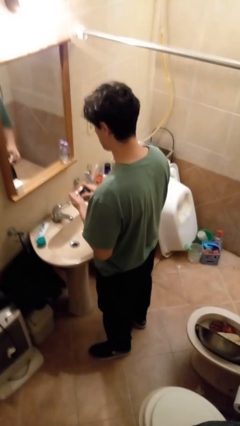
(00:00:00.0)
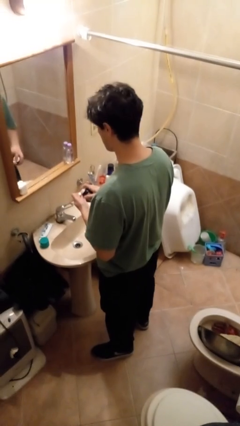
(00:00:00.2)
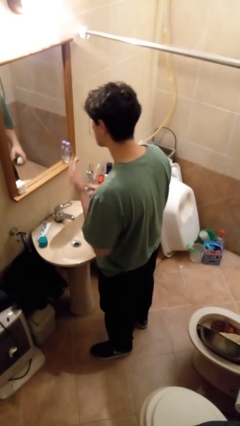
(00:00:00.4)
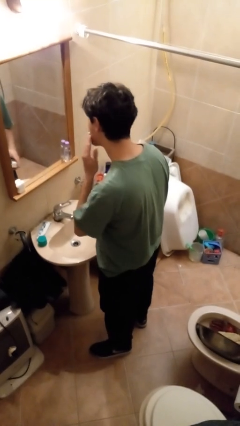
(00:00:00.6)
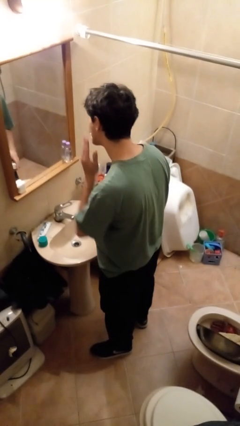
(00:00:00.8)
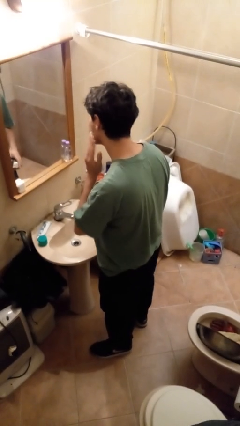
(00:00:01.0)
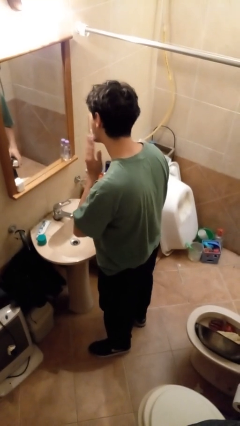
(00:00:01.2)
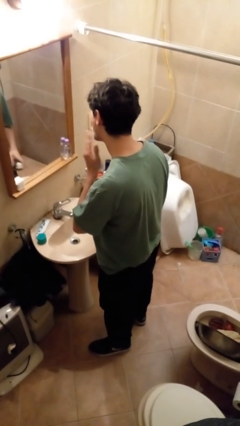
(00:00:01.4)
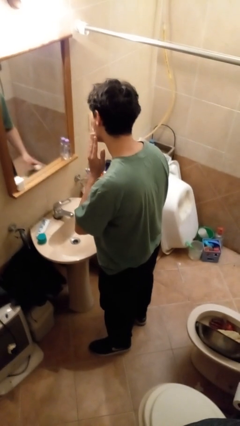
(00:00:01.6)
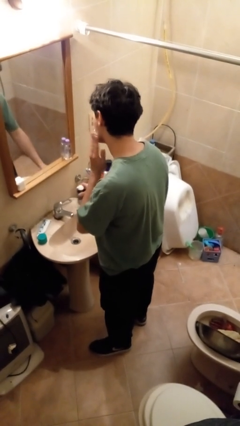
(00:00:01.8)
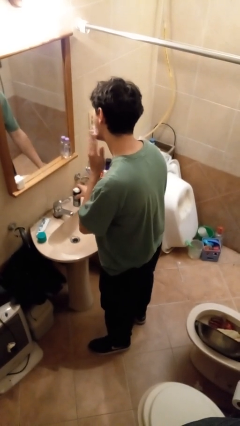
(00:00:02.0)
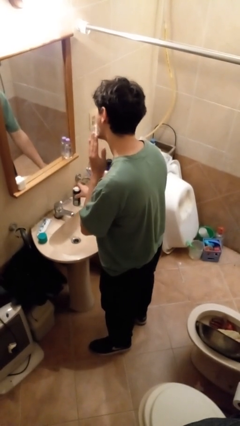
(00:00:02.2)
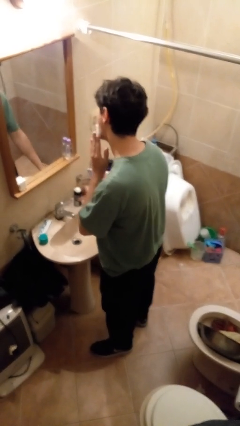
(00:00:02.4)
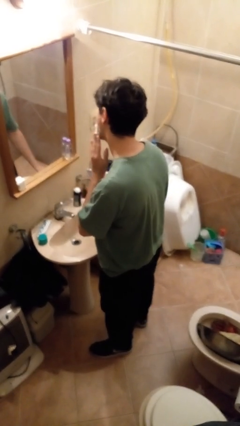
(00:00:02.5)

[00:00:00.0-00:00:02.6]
person applies shaving cream

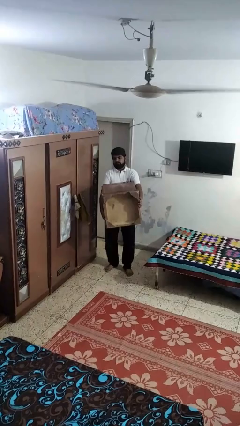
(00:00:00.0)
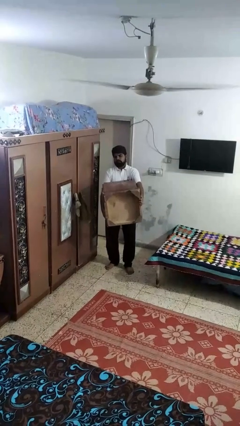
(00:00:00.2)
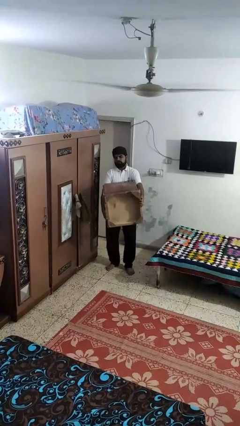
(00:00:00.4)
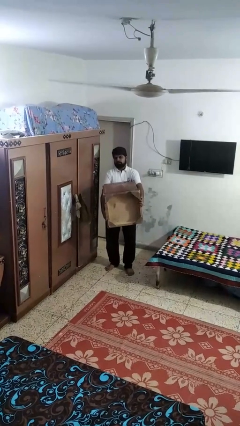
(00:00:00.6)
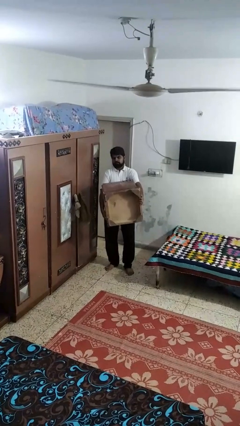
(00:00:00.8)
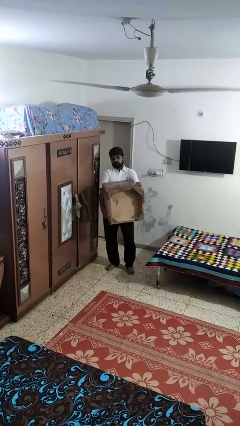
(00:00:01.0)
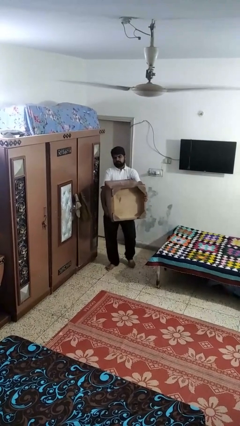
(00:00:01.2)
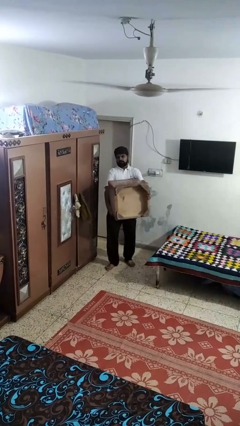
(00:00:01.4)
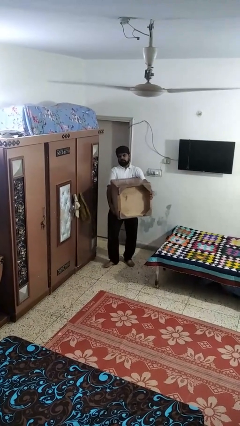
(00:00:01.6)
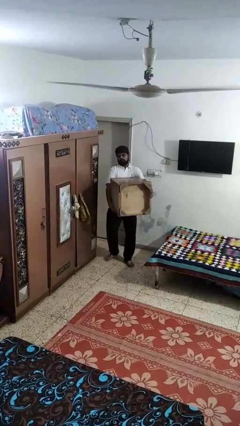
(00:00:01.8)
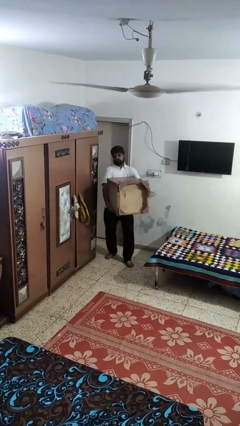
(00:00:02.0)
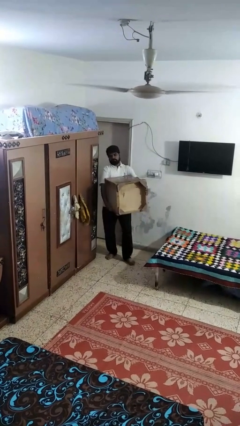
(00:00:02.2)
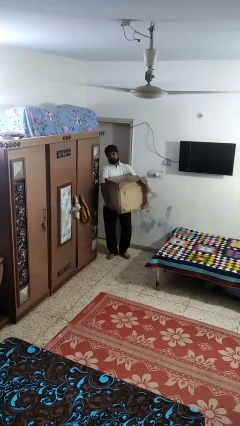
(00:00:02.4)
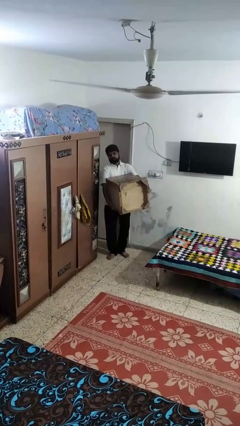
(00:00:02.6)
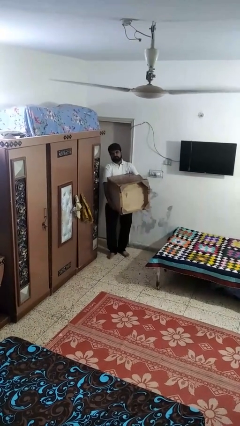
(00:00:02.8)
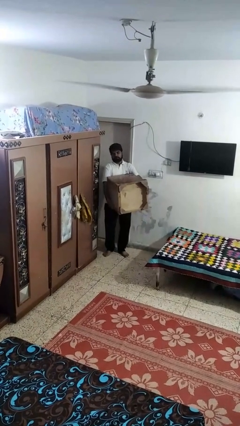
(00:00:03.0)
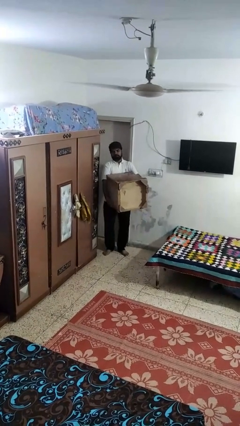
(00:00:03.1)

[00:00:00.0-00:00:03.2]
person carries furniture

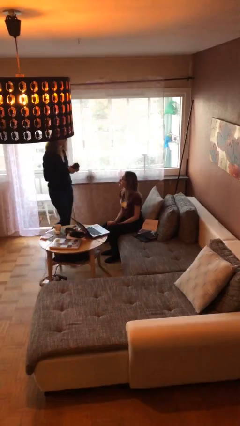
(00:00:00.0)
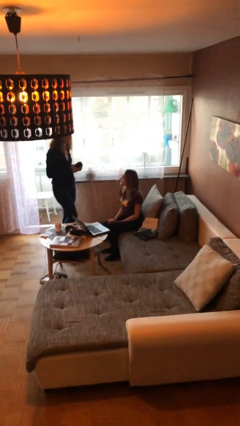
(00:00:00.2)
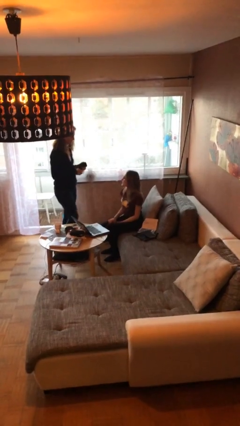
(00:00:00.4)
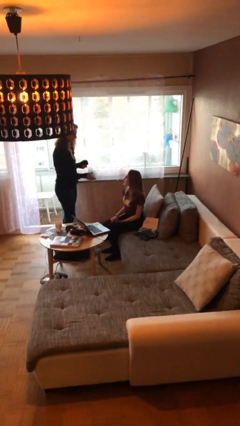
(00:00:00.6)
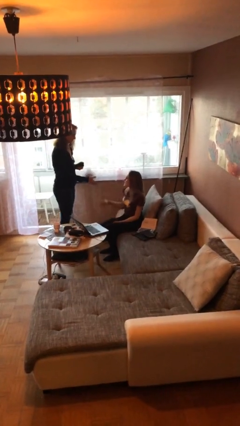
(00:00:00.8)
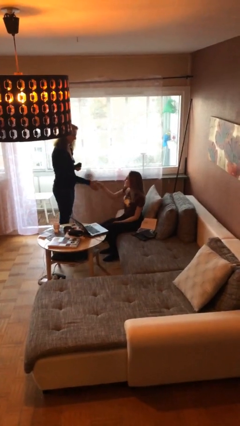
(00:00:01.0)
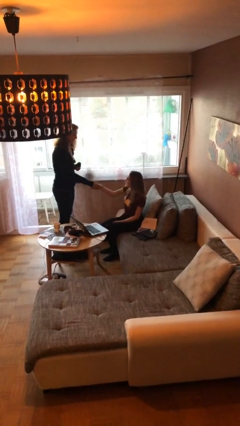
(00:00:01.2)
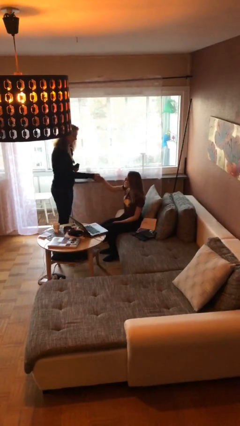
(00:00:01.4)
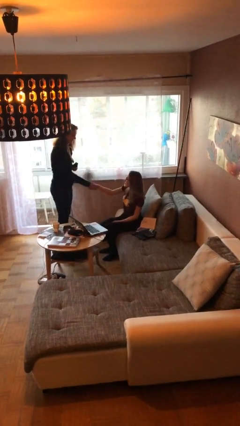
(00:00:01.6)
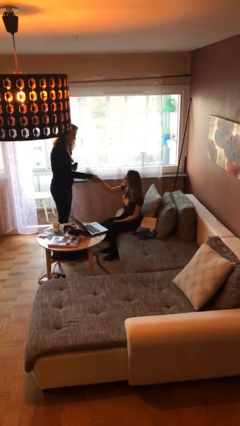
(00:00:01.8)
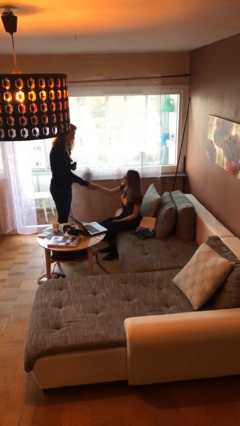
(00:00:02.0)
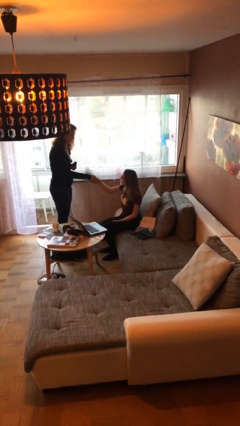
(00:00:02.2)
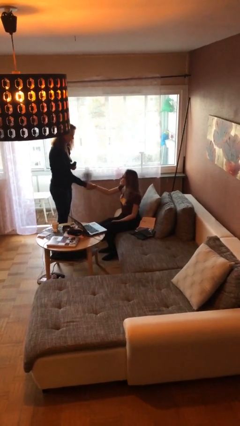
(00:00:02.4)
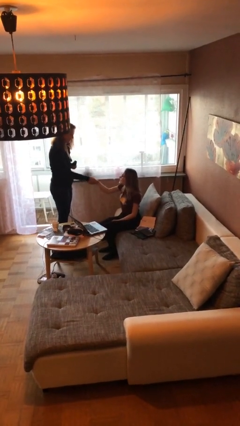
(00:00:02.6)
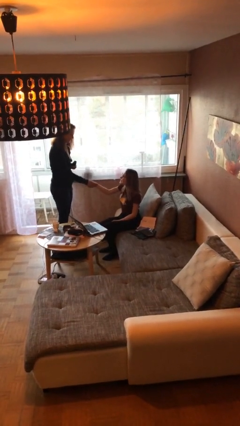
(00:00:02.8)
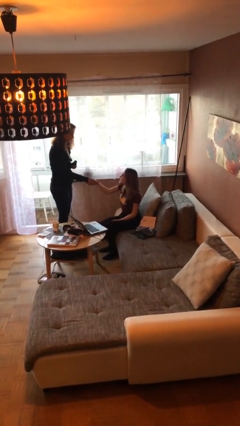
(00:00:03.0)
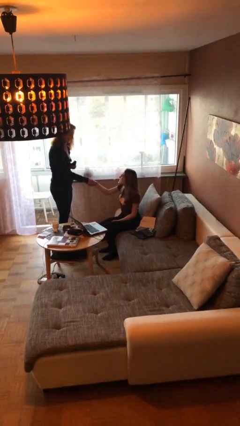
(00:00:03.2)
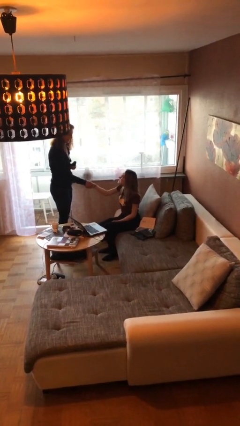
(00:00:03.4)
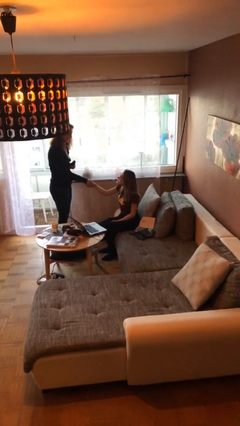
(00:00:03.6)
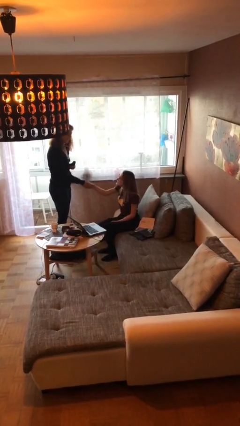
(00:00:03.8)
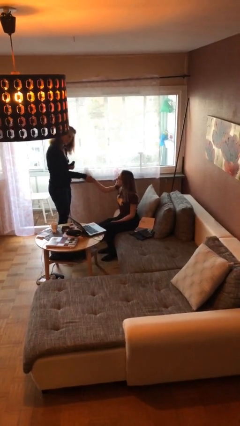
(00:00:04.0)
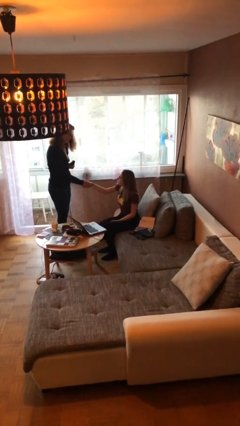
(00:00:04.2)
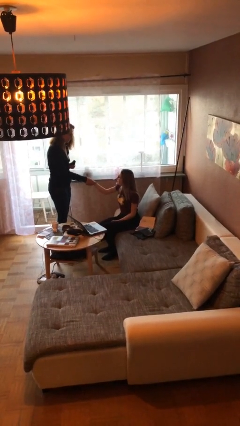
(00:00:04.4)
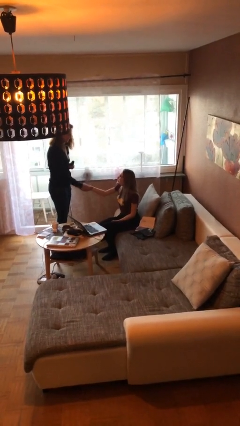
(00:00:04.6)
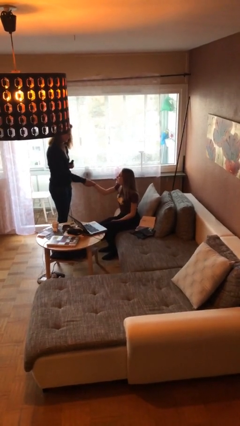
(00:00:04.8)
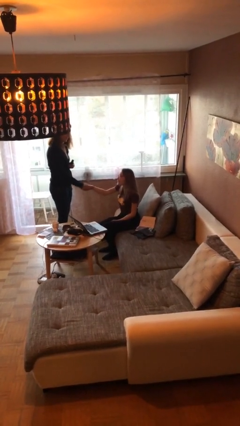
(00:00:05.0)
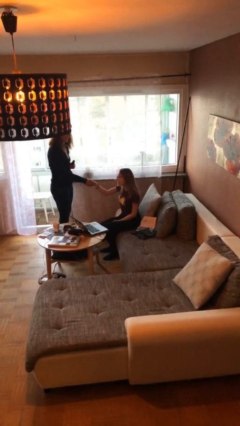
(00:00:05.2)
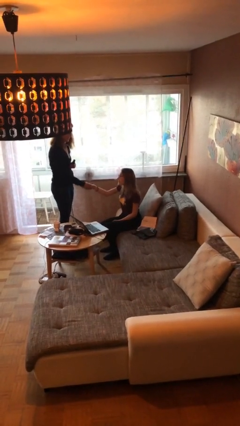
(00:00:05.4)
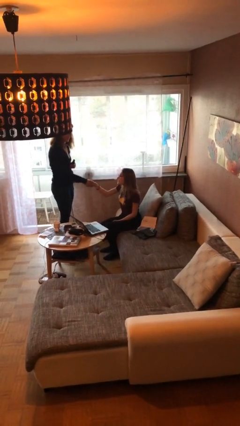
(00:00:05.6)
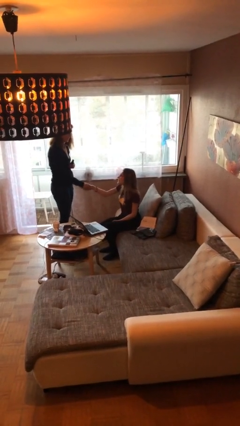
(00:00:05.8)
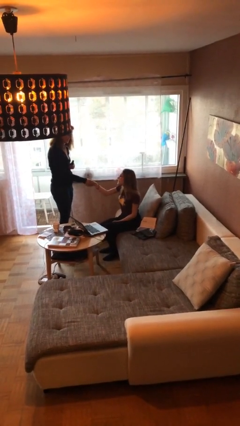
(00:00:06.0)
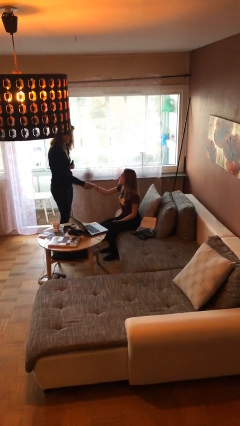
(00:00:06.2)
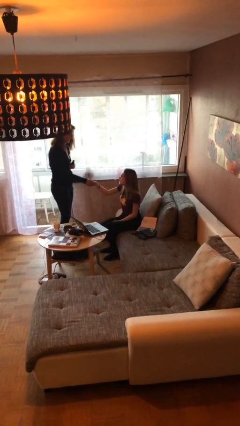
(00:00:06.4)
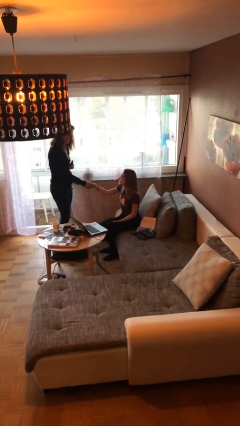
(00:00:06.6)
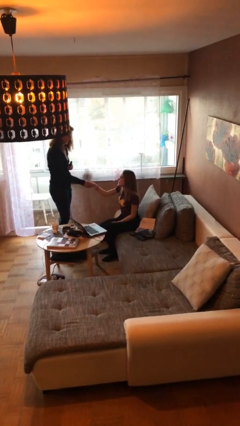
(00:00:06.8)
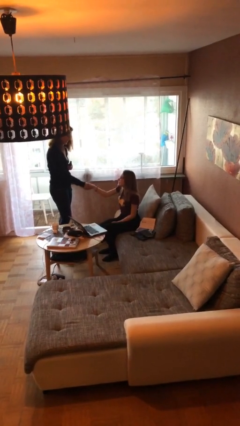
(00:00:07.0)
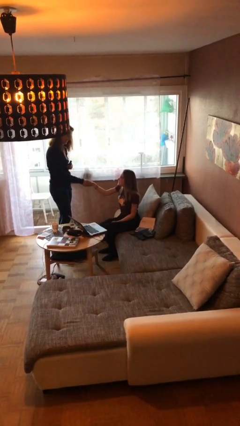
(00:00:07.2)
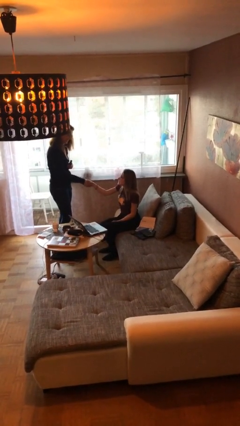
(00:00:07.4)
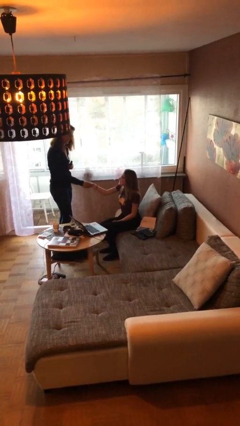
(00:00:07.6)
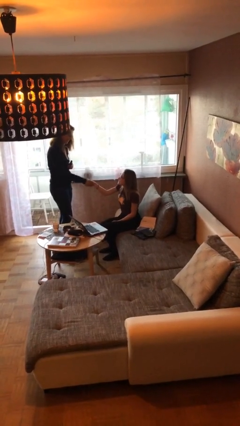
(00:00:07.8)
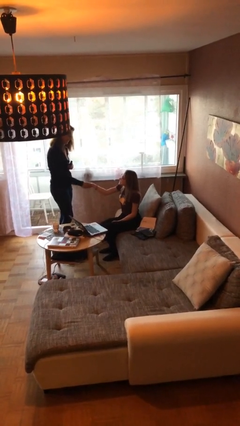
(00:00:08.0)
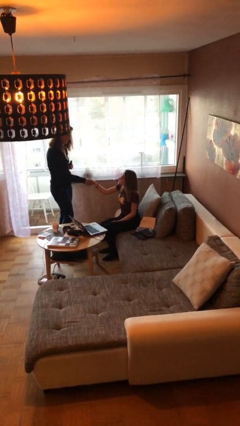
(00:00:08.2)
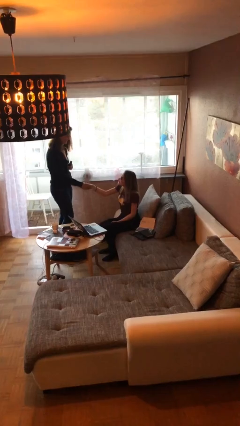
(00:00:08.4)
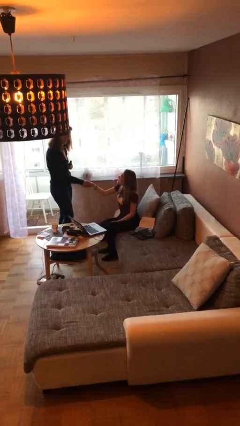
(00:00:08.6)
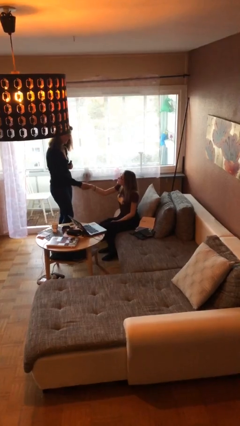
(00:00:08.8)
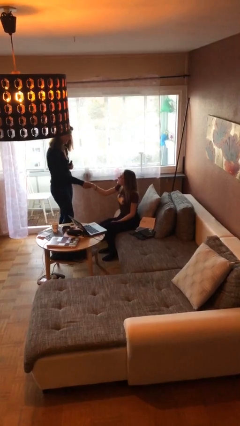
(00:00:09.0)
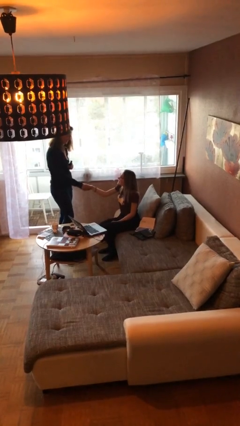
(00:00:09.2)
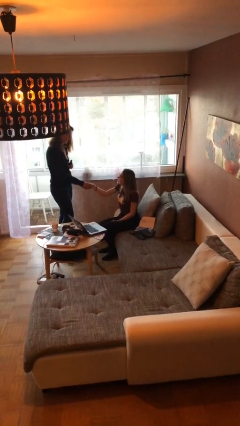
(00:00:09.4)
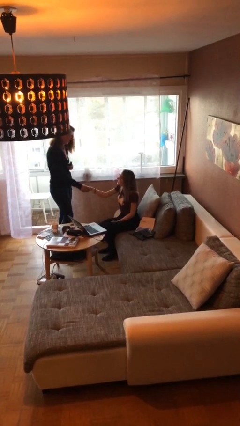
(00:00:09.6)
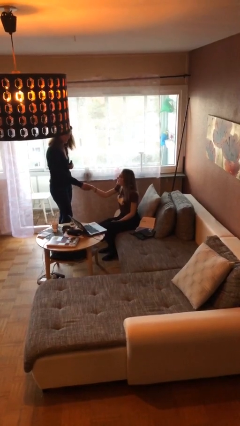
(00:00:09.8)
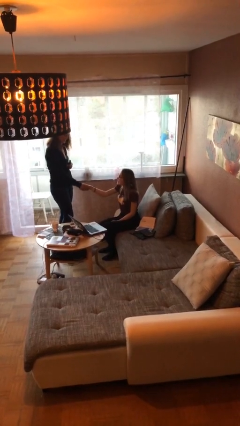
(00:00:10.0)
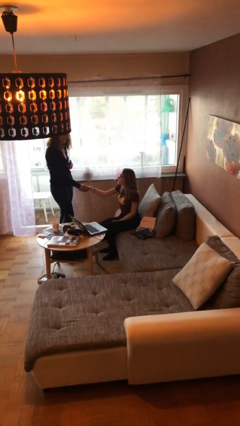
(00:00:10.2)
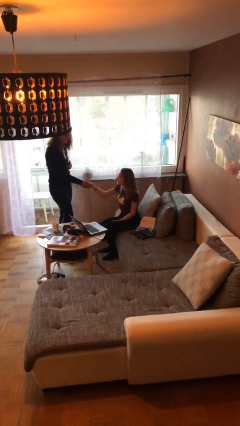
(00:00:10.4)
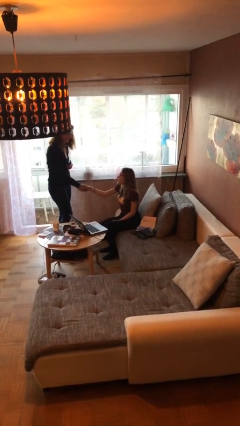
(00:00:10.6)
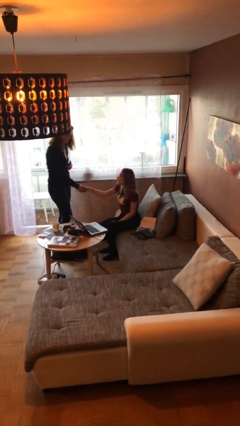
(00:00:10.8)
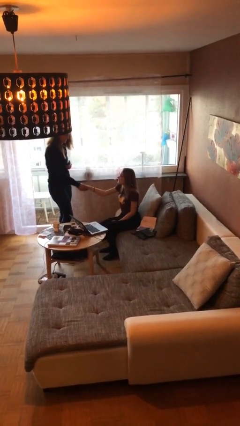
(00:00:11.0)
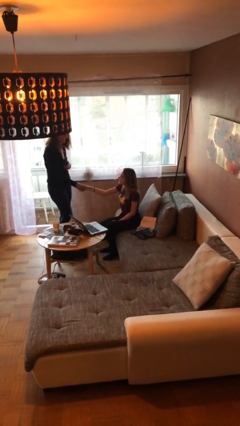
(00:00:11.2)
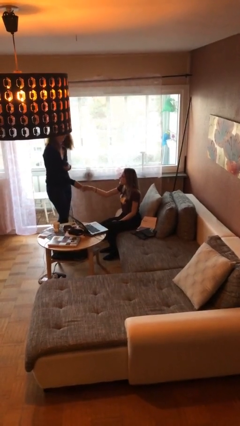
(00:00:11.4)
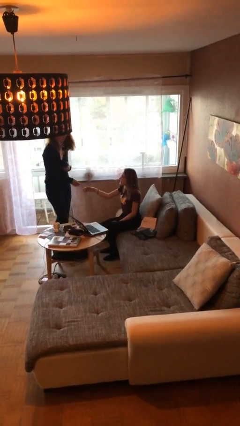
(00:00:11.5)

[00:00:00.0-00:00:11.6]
person shakes hand

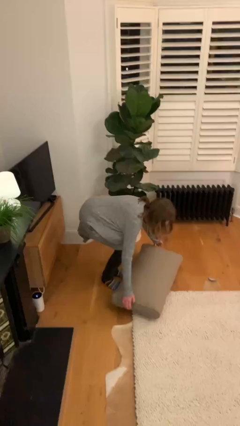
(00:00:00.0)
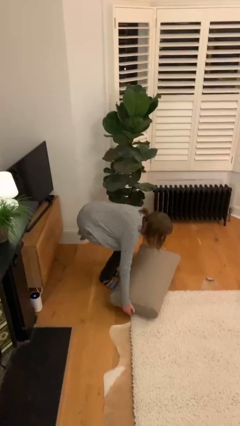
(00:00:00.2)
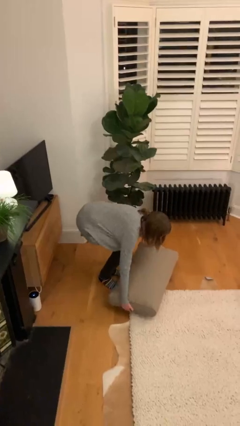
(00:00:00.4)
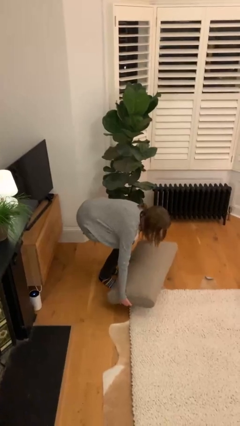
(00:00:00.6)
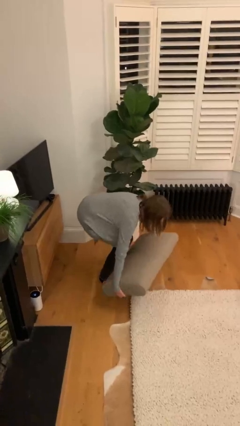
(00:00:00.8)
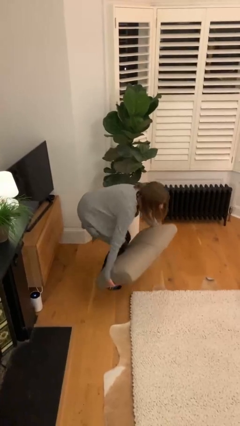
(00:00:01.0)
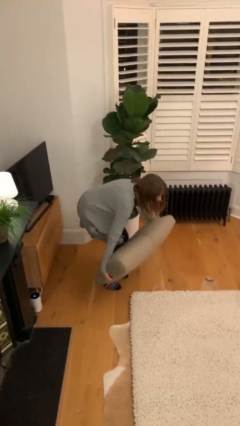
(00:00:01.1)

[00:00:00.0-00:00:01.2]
person picks up object from floor
